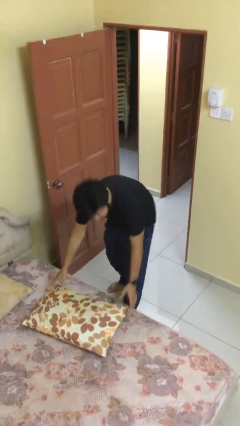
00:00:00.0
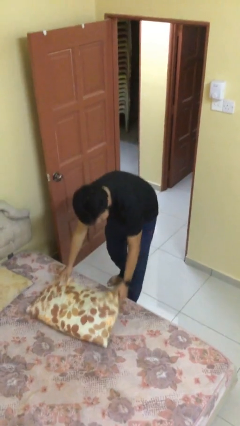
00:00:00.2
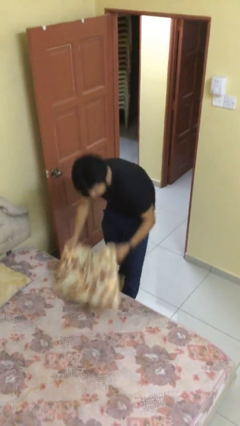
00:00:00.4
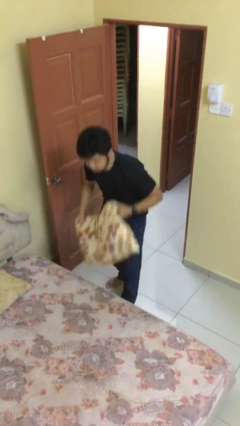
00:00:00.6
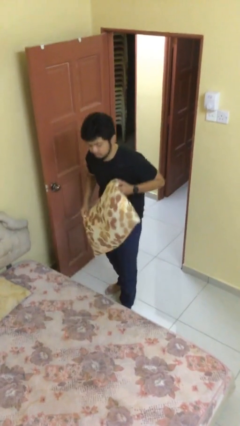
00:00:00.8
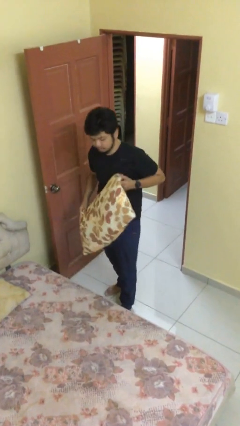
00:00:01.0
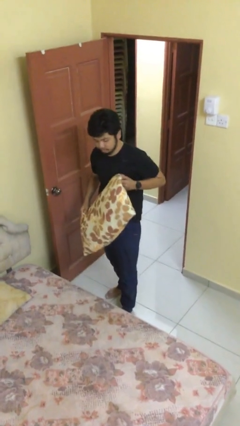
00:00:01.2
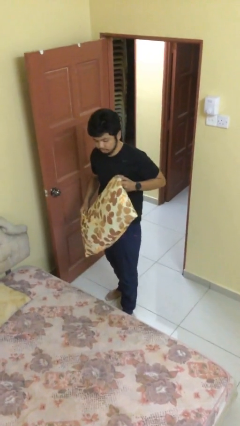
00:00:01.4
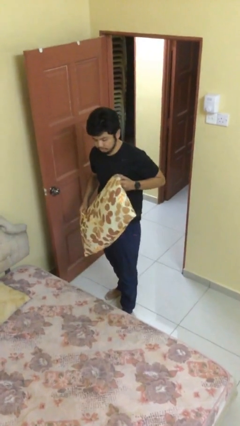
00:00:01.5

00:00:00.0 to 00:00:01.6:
person picks up object from bed

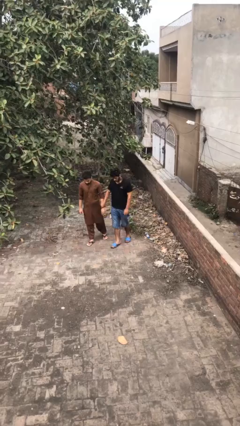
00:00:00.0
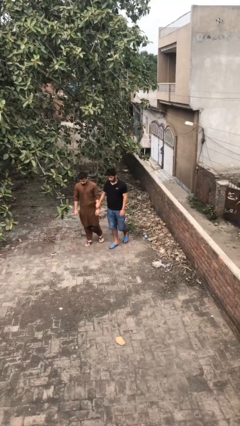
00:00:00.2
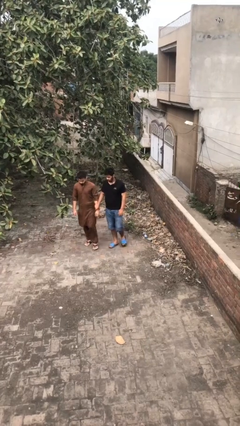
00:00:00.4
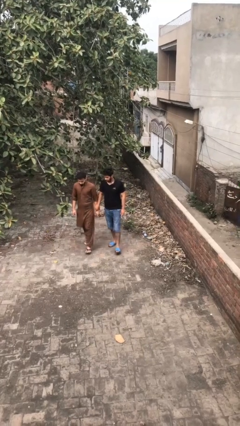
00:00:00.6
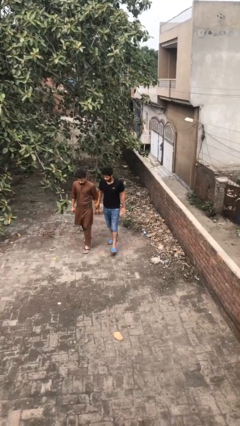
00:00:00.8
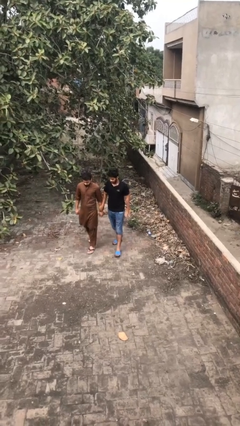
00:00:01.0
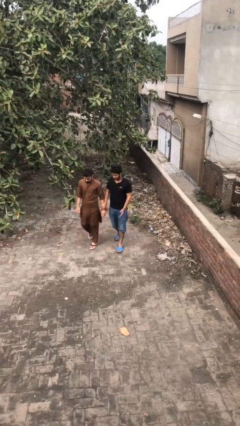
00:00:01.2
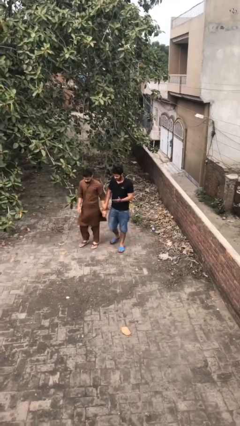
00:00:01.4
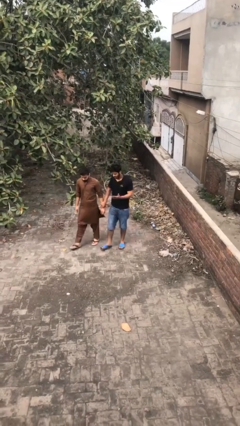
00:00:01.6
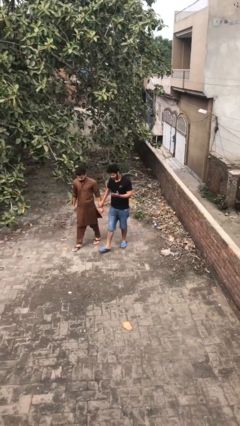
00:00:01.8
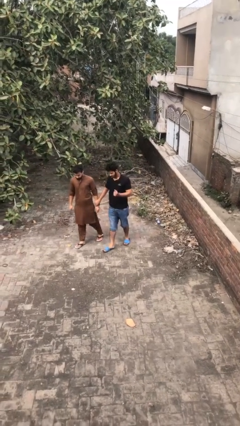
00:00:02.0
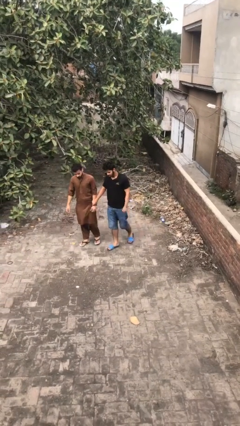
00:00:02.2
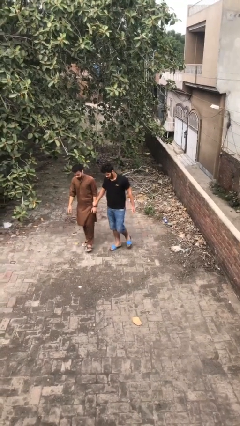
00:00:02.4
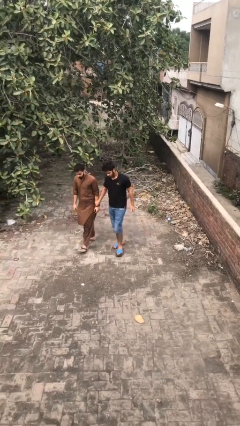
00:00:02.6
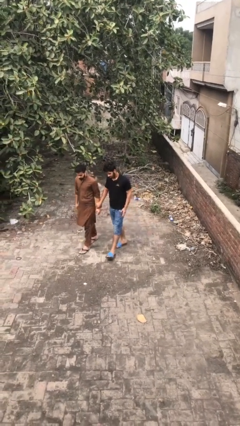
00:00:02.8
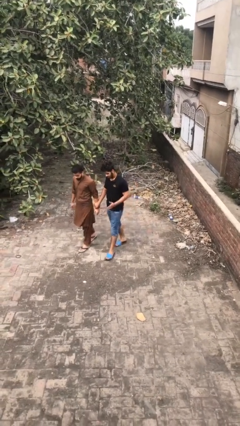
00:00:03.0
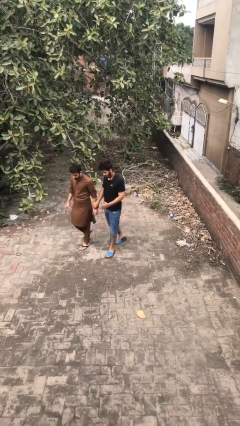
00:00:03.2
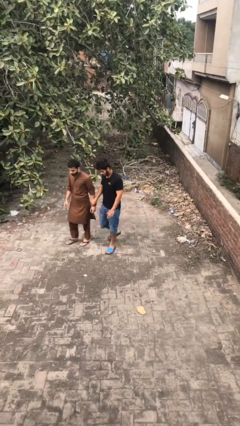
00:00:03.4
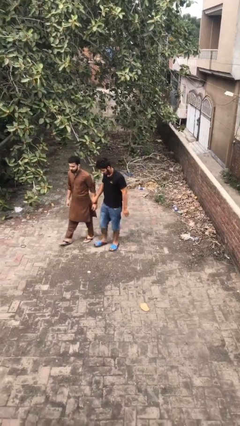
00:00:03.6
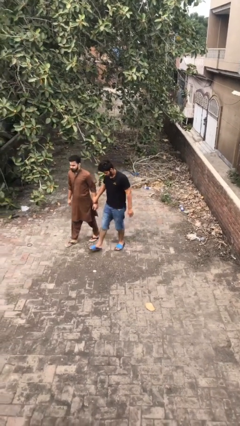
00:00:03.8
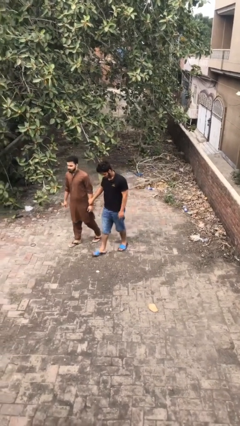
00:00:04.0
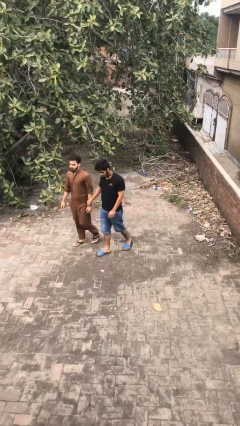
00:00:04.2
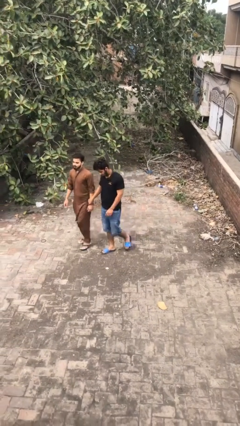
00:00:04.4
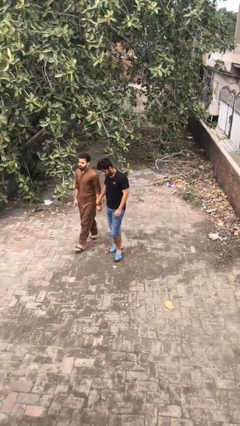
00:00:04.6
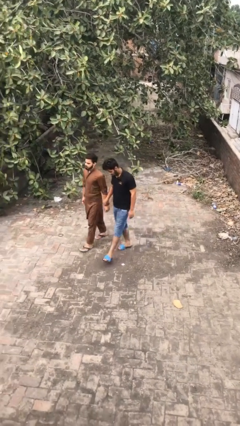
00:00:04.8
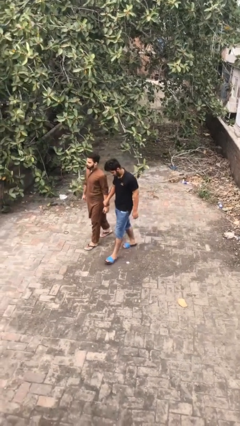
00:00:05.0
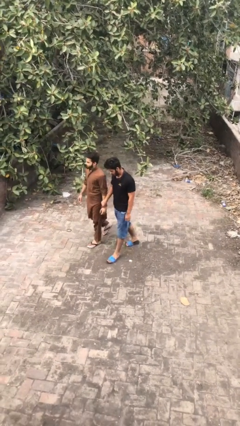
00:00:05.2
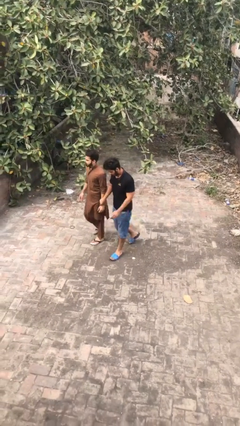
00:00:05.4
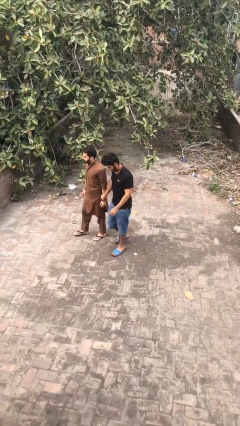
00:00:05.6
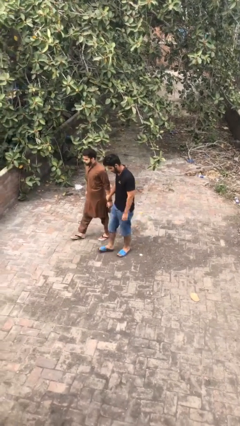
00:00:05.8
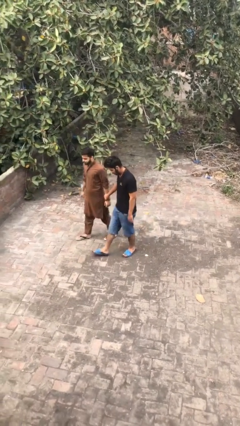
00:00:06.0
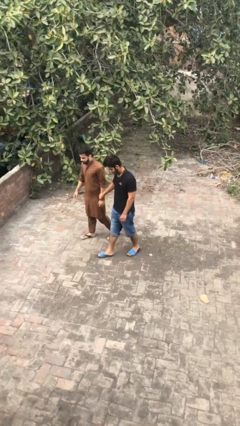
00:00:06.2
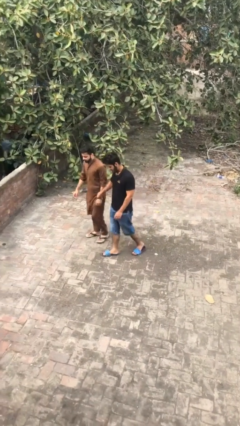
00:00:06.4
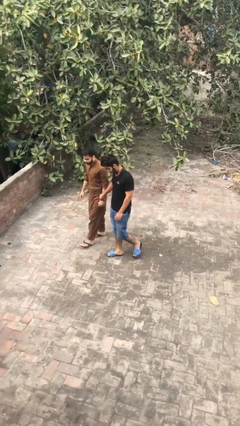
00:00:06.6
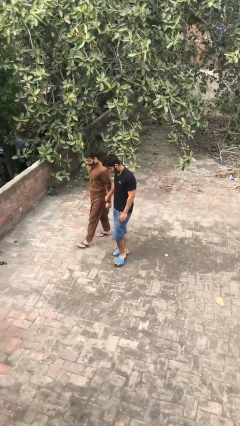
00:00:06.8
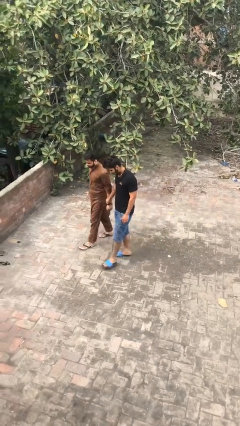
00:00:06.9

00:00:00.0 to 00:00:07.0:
person holds hand

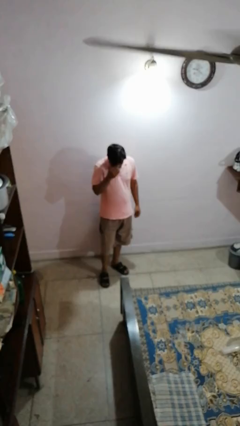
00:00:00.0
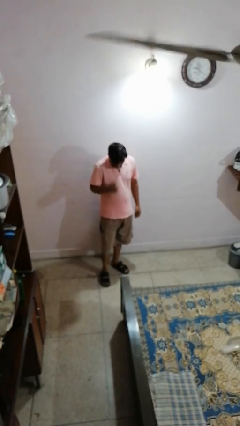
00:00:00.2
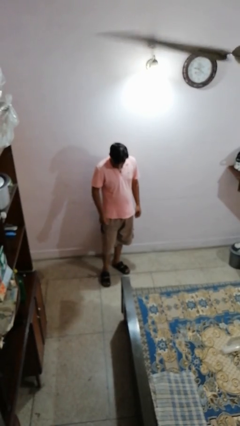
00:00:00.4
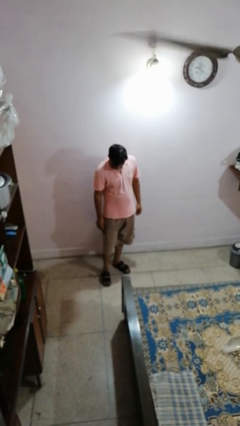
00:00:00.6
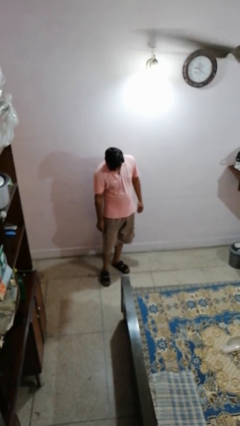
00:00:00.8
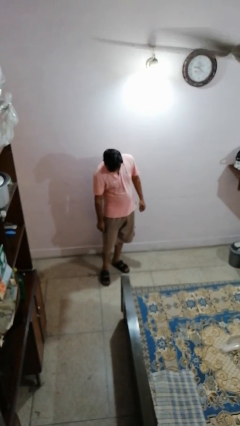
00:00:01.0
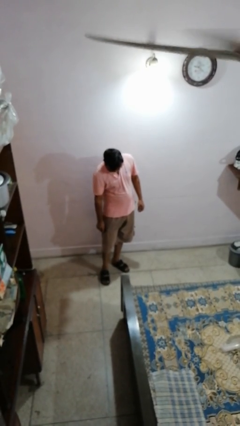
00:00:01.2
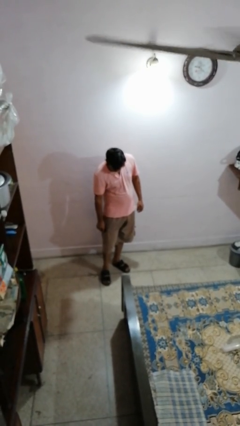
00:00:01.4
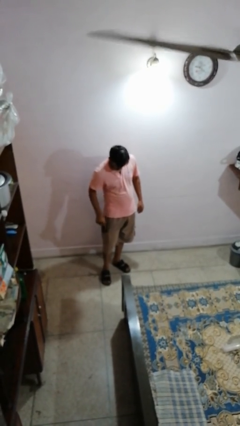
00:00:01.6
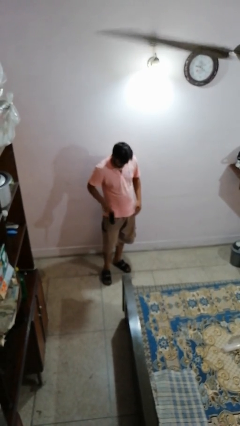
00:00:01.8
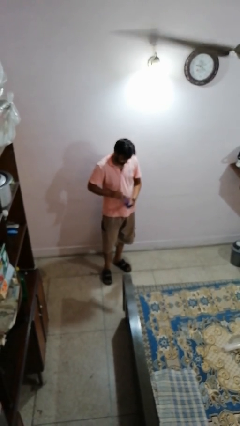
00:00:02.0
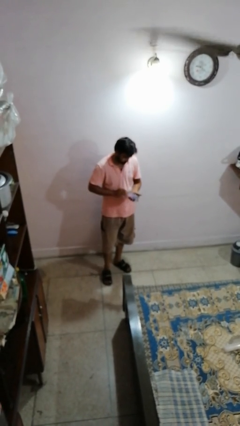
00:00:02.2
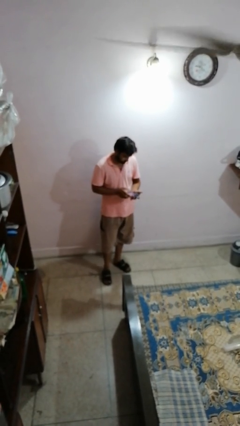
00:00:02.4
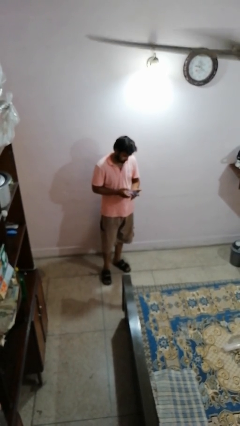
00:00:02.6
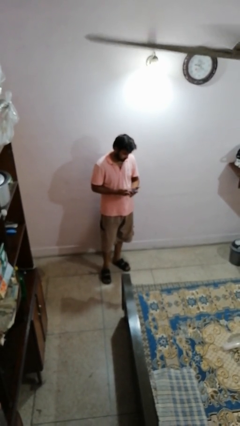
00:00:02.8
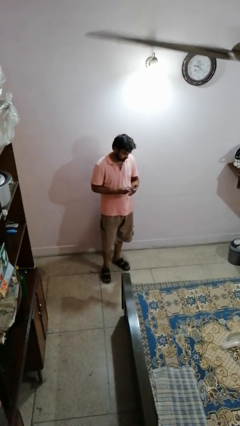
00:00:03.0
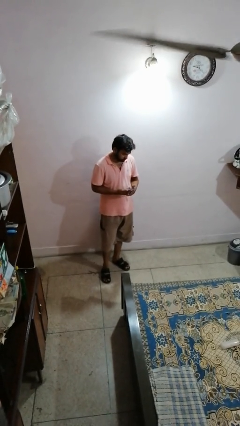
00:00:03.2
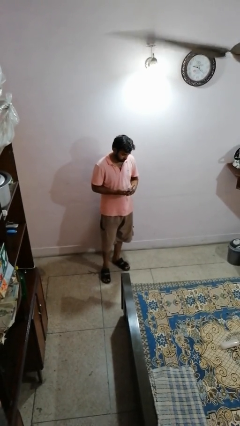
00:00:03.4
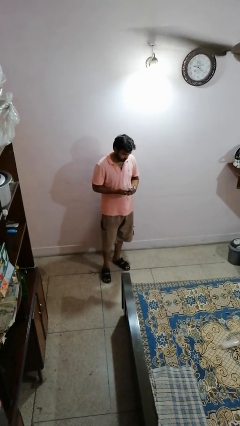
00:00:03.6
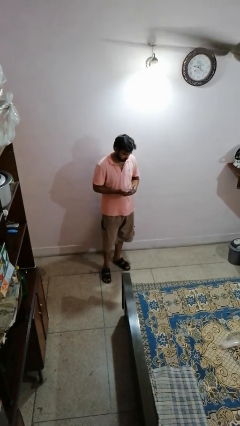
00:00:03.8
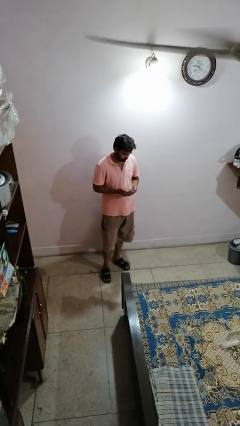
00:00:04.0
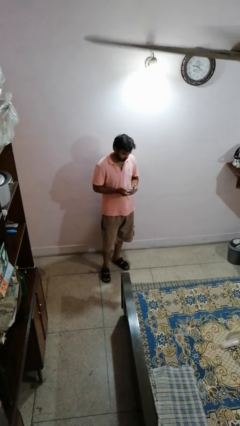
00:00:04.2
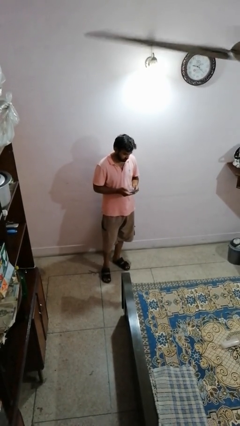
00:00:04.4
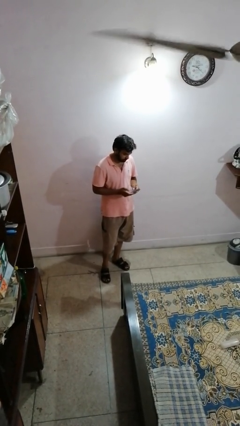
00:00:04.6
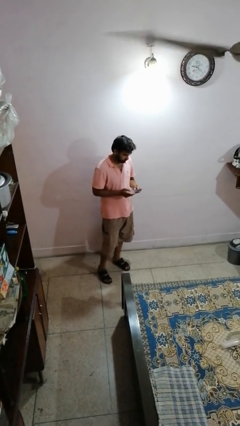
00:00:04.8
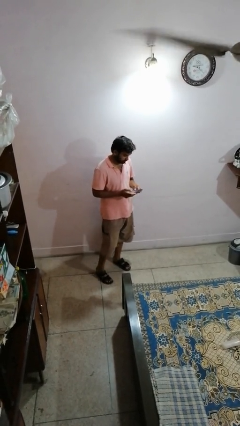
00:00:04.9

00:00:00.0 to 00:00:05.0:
person takes phone from pocket

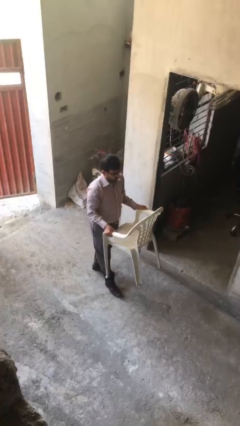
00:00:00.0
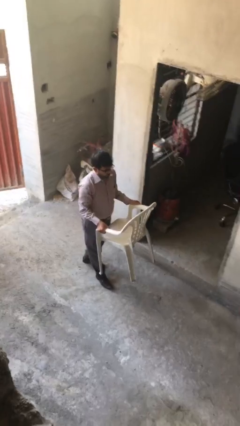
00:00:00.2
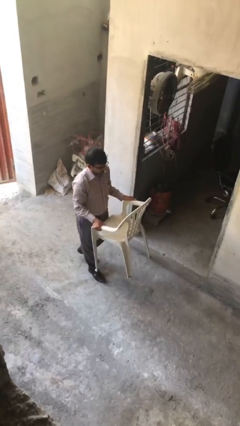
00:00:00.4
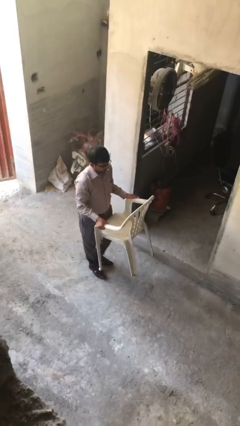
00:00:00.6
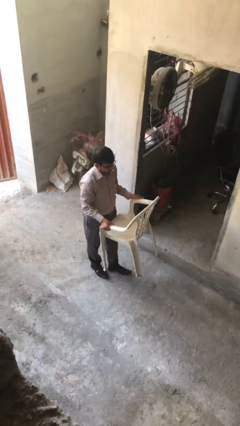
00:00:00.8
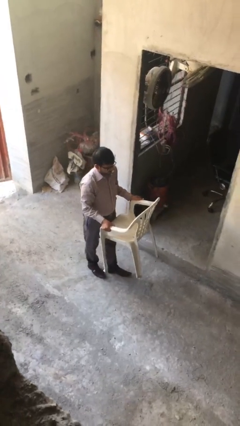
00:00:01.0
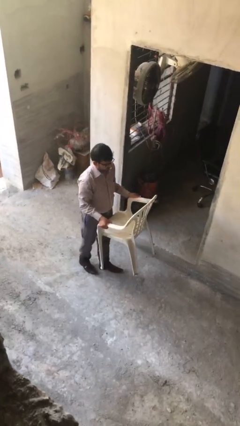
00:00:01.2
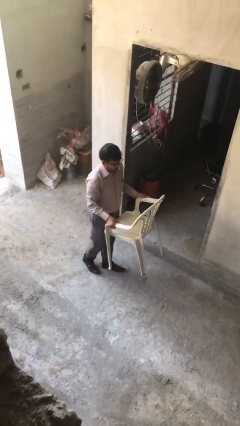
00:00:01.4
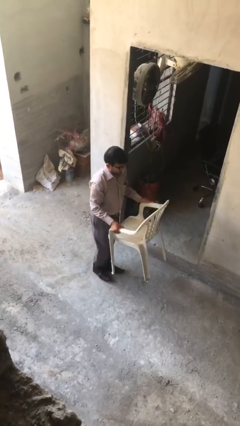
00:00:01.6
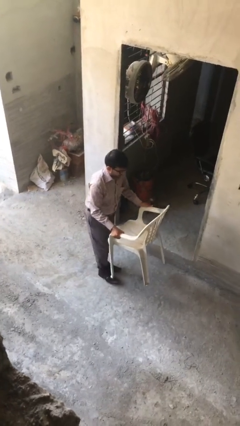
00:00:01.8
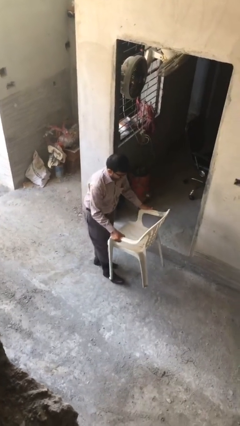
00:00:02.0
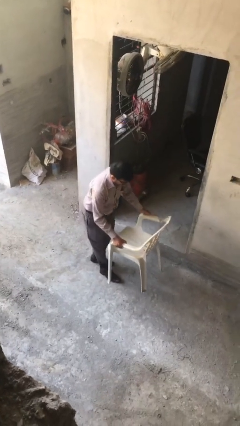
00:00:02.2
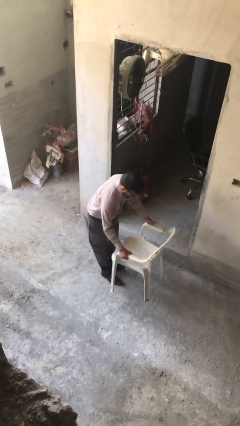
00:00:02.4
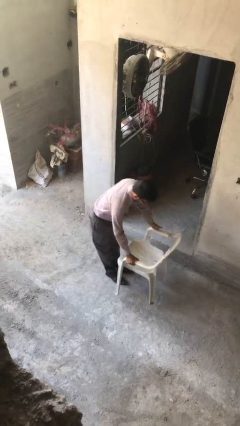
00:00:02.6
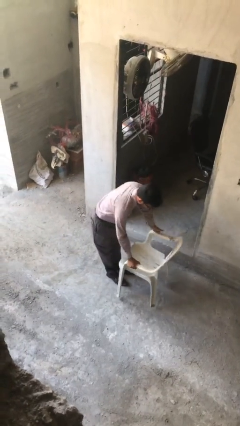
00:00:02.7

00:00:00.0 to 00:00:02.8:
person puts down object on floor

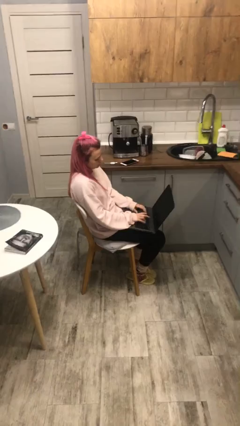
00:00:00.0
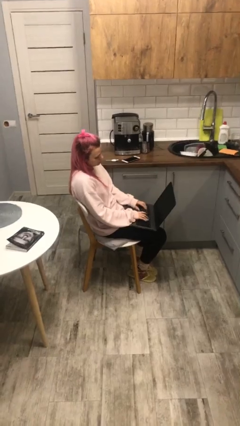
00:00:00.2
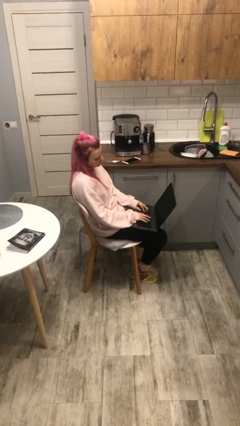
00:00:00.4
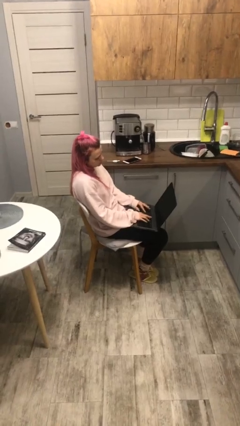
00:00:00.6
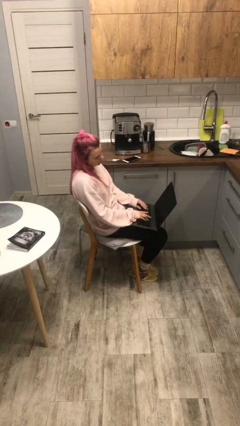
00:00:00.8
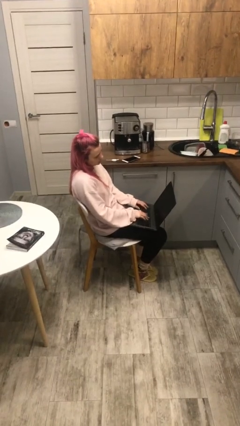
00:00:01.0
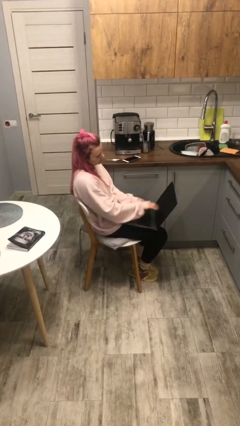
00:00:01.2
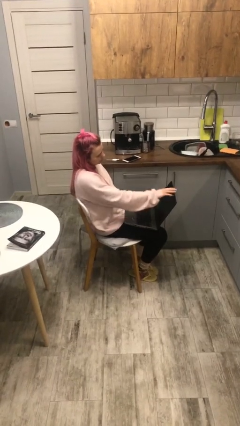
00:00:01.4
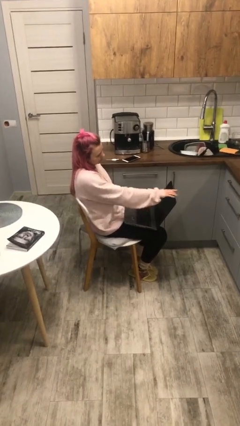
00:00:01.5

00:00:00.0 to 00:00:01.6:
person interacts with laptop
